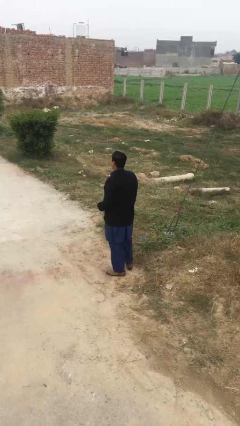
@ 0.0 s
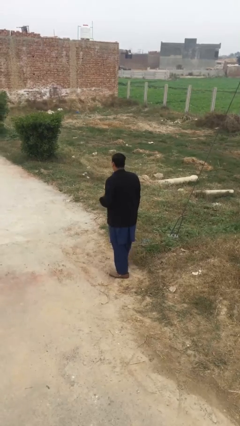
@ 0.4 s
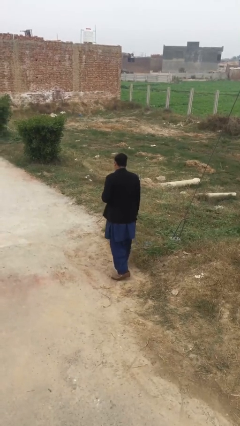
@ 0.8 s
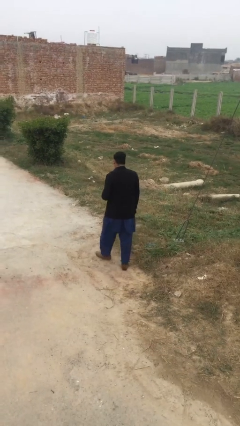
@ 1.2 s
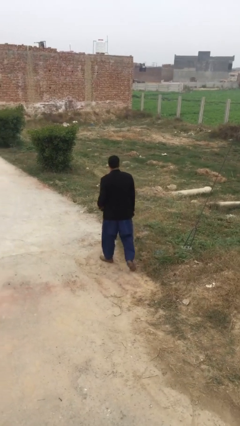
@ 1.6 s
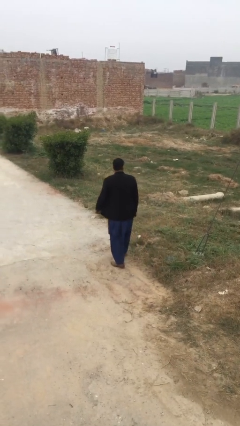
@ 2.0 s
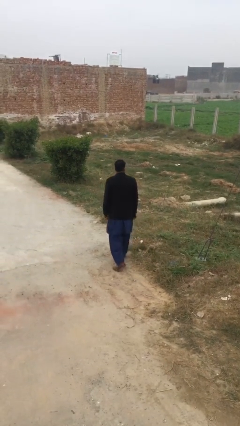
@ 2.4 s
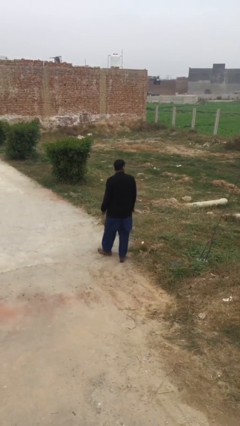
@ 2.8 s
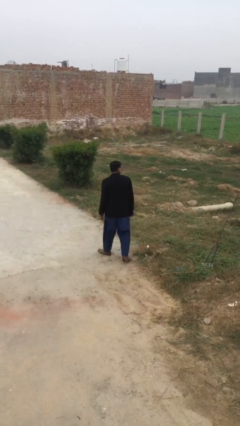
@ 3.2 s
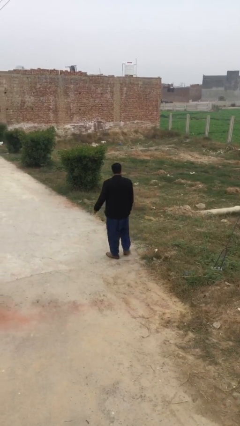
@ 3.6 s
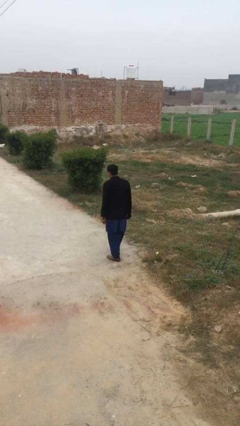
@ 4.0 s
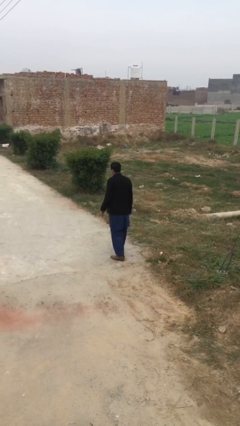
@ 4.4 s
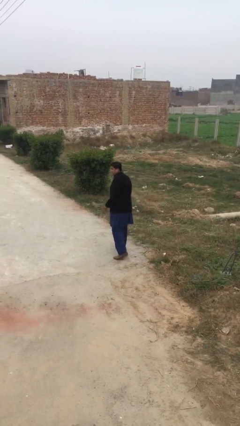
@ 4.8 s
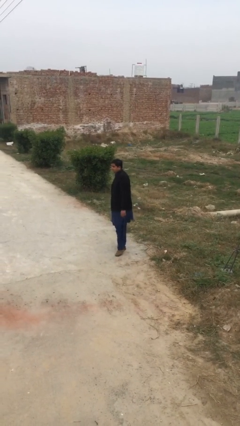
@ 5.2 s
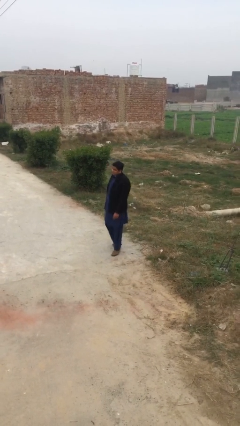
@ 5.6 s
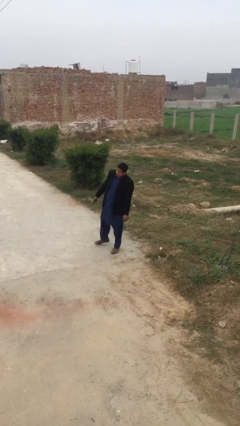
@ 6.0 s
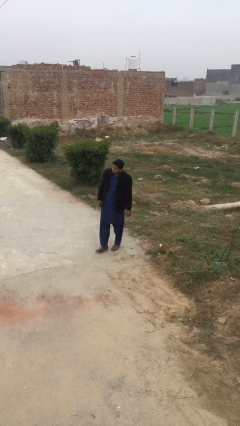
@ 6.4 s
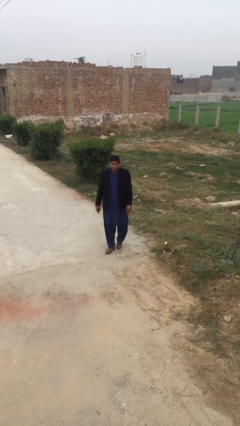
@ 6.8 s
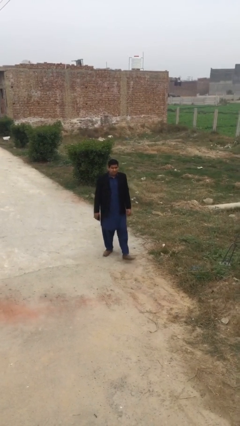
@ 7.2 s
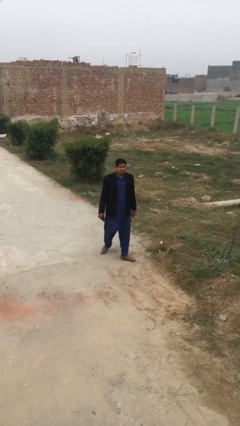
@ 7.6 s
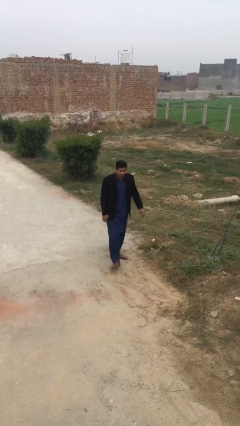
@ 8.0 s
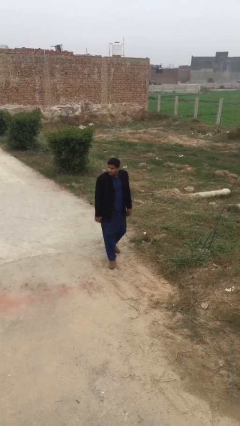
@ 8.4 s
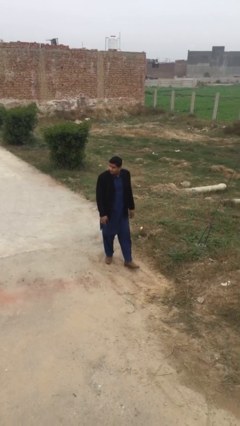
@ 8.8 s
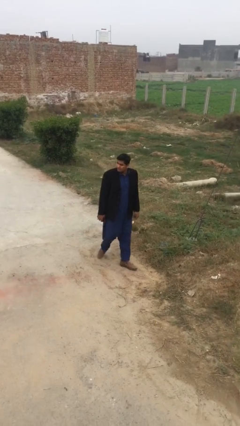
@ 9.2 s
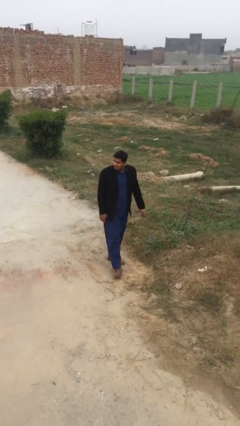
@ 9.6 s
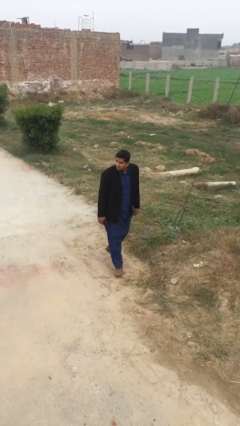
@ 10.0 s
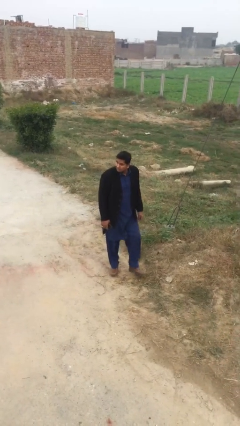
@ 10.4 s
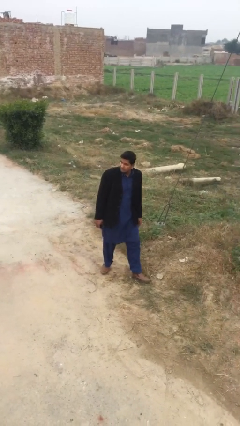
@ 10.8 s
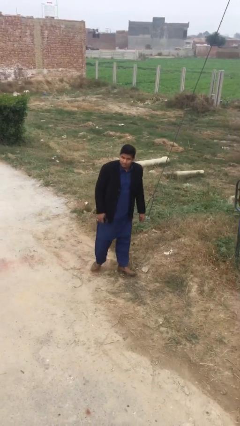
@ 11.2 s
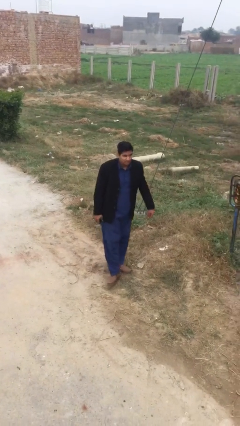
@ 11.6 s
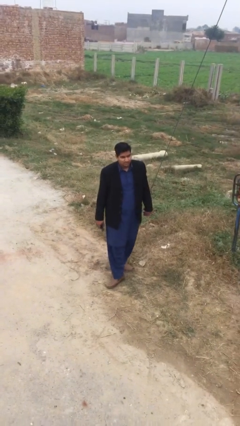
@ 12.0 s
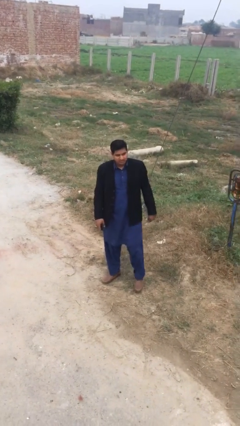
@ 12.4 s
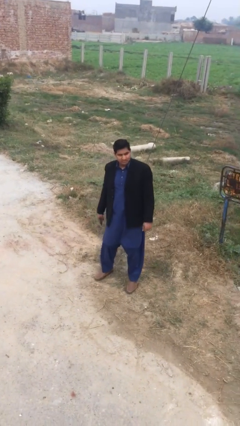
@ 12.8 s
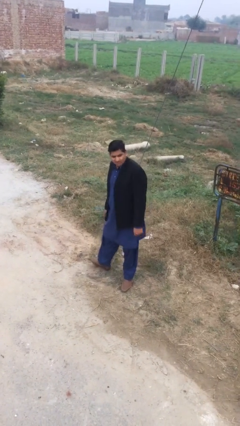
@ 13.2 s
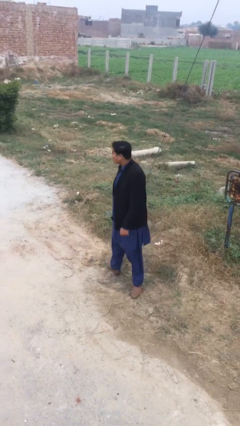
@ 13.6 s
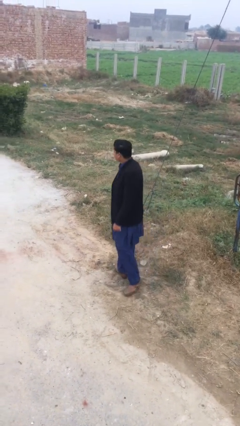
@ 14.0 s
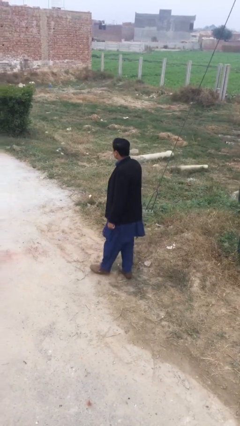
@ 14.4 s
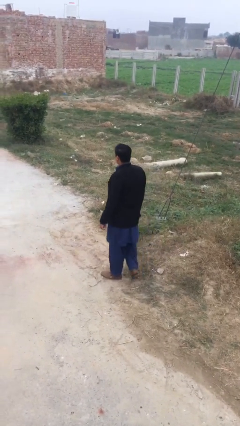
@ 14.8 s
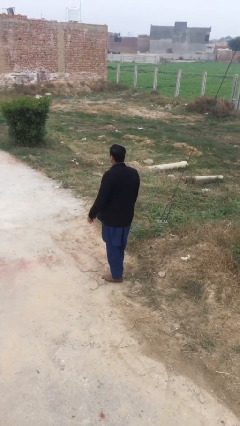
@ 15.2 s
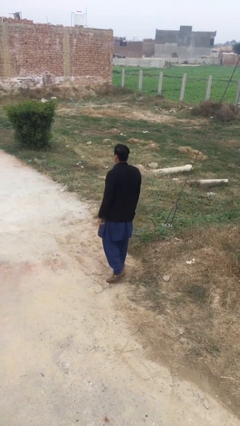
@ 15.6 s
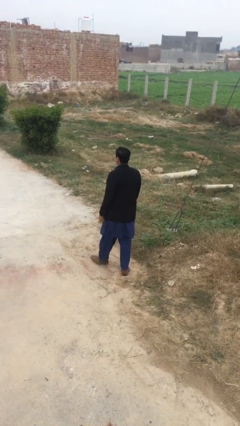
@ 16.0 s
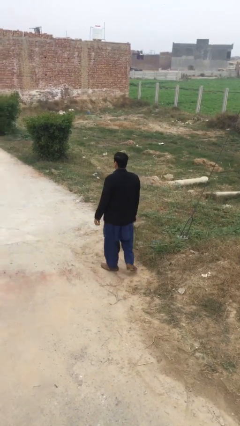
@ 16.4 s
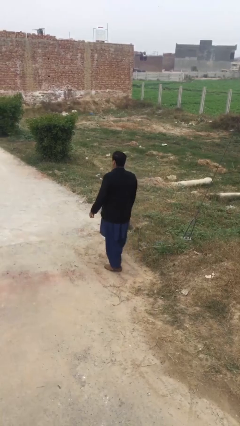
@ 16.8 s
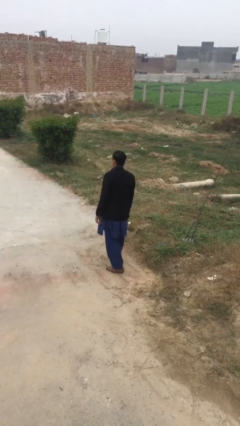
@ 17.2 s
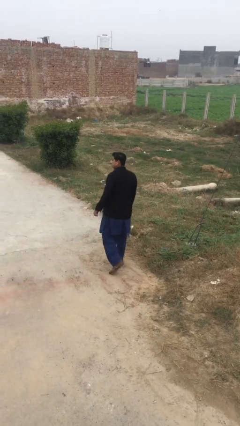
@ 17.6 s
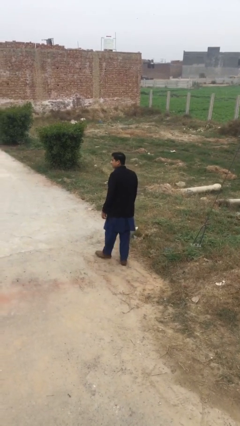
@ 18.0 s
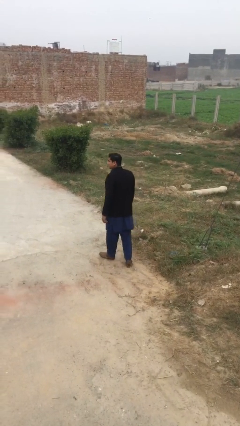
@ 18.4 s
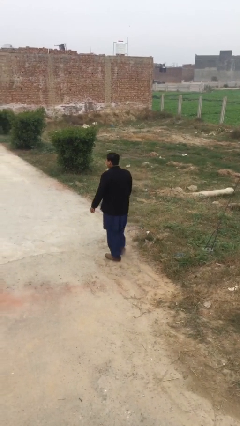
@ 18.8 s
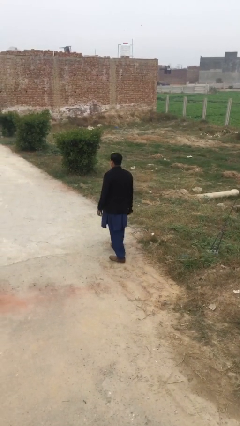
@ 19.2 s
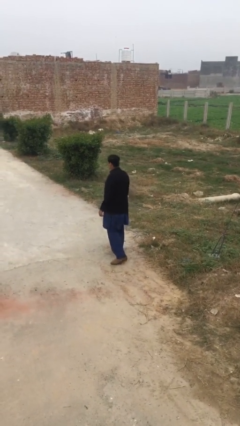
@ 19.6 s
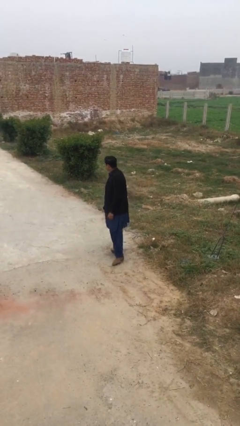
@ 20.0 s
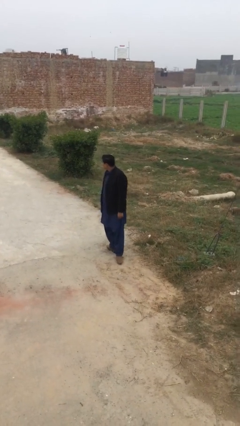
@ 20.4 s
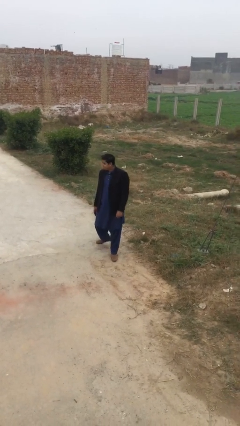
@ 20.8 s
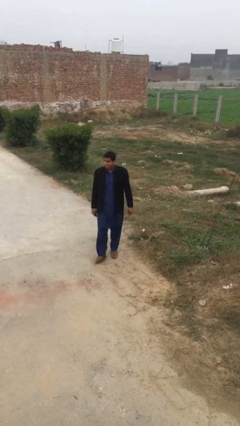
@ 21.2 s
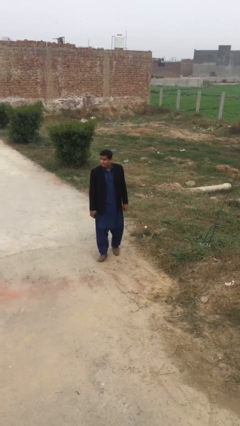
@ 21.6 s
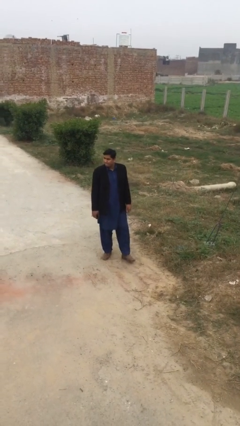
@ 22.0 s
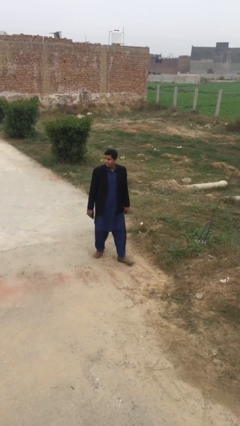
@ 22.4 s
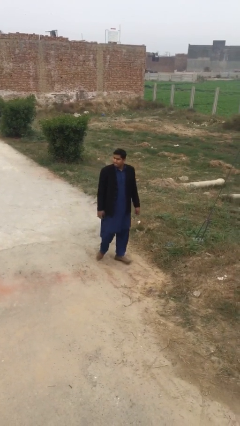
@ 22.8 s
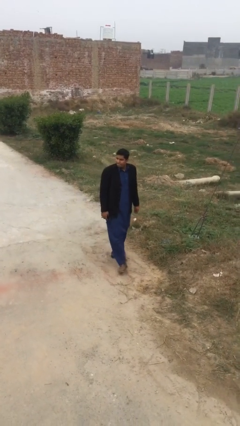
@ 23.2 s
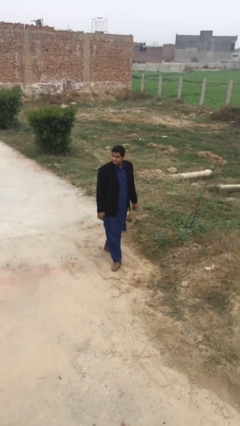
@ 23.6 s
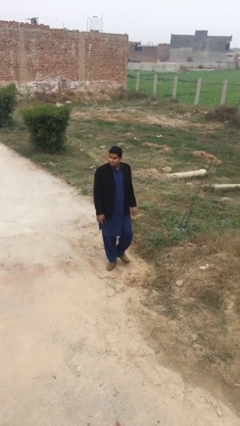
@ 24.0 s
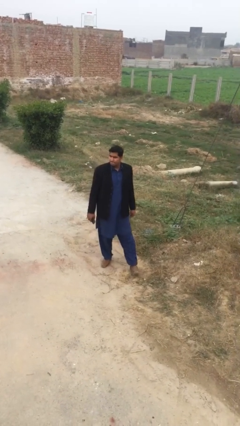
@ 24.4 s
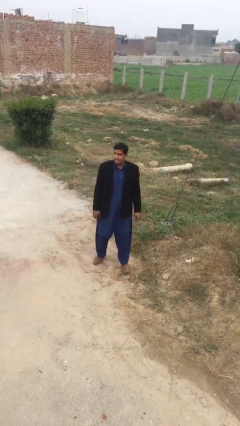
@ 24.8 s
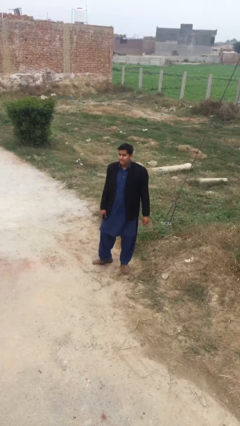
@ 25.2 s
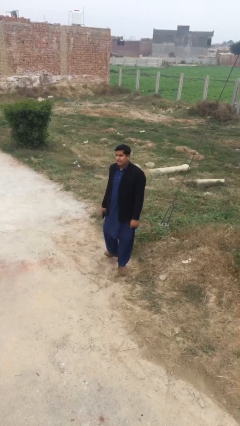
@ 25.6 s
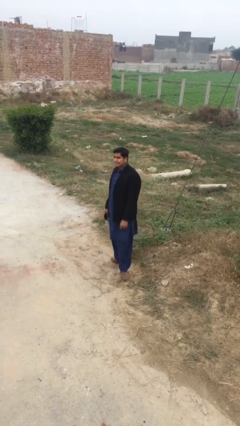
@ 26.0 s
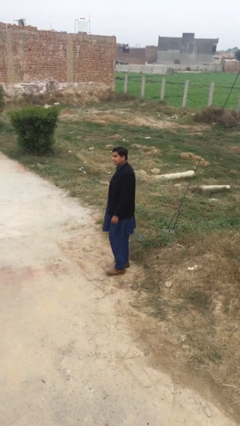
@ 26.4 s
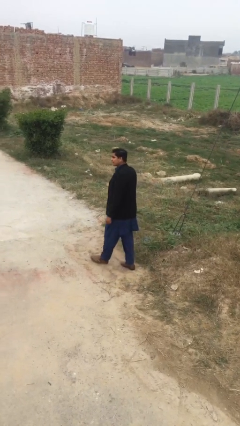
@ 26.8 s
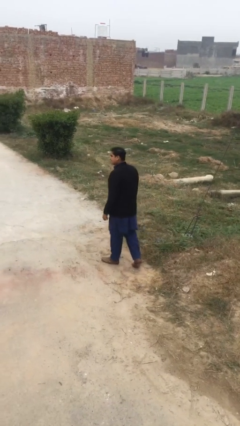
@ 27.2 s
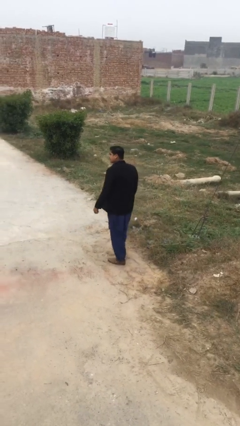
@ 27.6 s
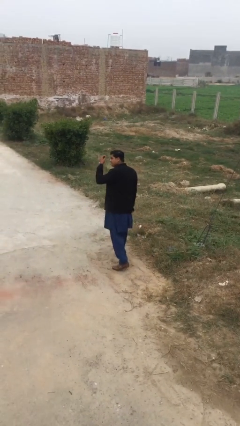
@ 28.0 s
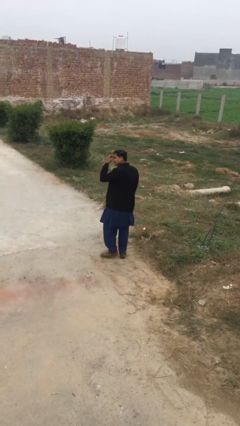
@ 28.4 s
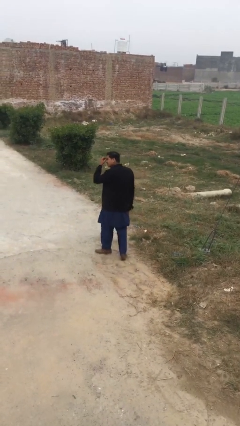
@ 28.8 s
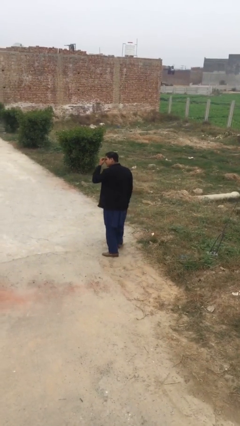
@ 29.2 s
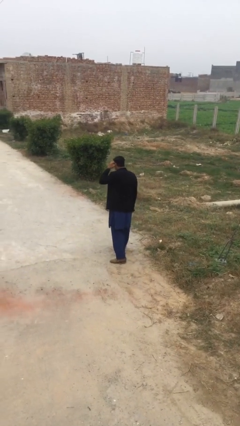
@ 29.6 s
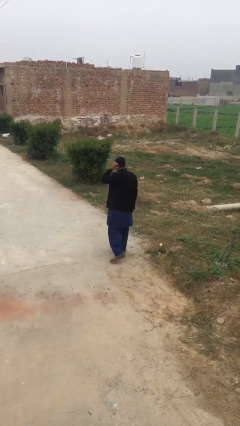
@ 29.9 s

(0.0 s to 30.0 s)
person walks

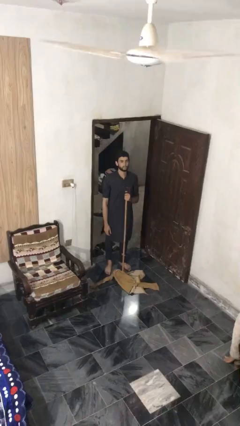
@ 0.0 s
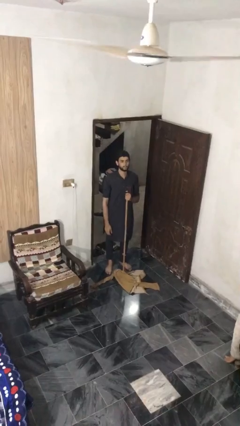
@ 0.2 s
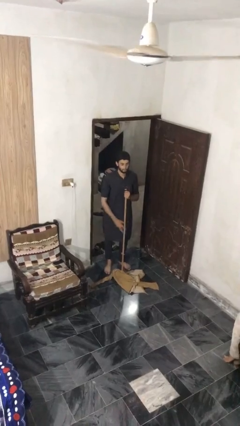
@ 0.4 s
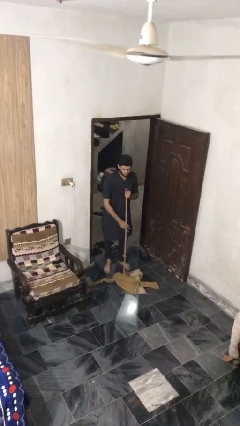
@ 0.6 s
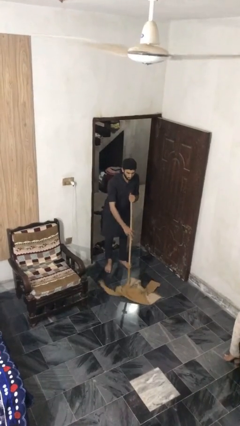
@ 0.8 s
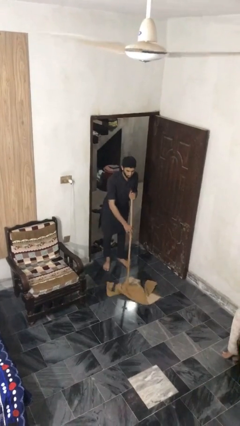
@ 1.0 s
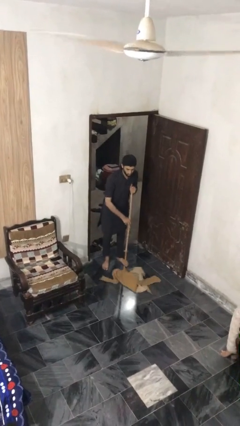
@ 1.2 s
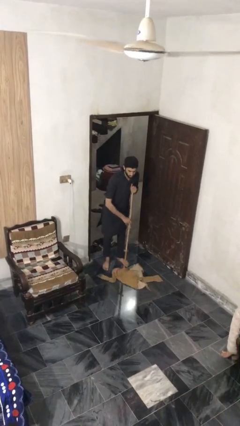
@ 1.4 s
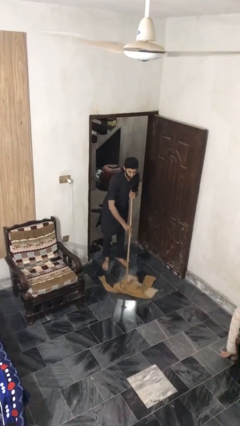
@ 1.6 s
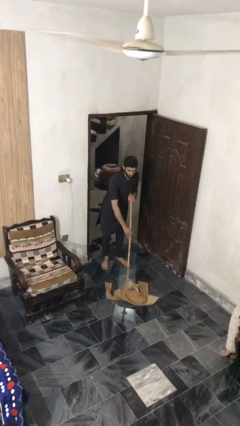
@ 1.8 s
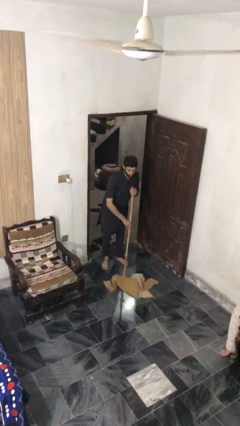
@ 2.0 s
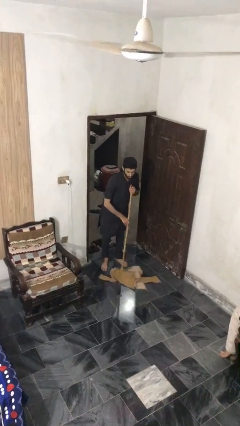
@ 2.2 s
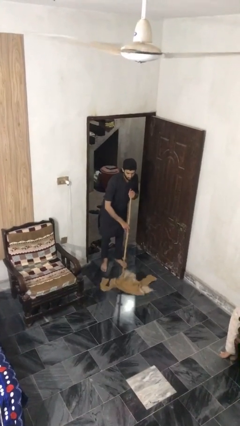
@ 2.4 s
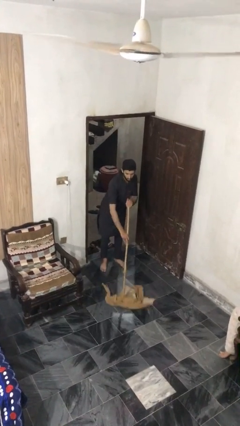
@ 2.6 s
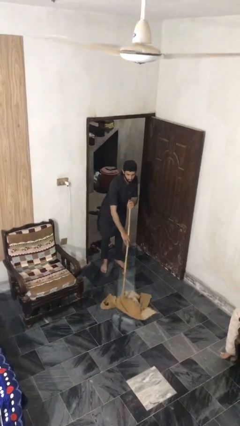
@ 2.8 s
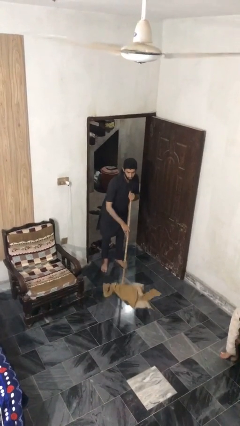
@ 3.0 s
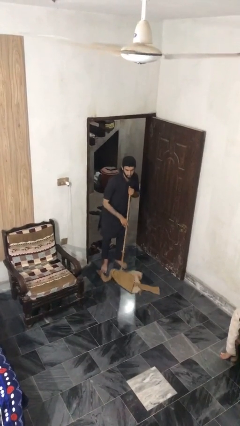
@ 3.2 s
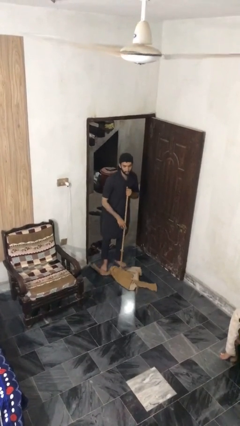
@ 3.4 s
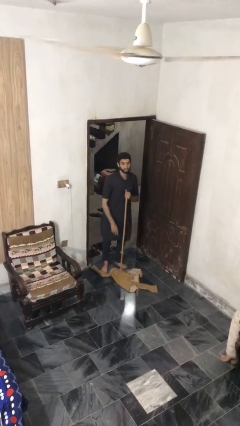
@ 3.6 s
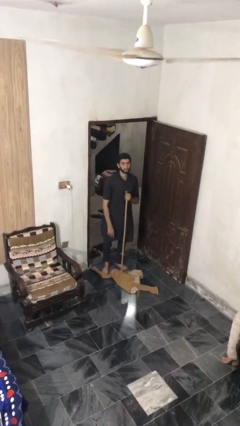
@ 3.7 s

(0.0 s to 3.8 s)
person mops
